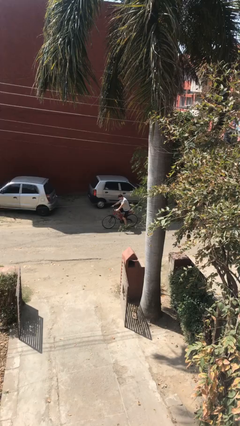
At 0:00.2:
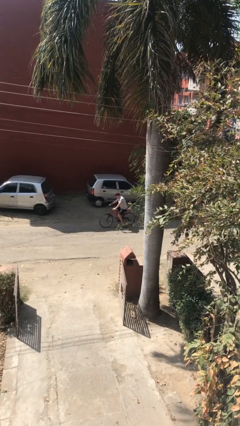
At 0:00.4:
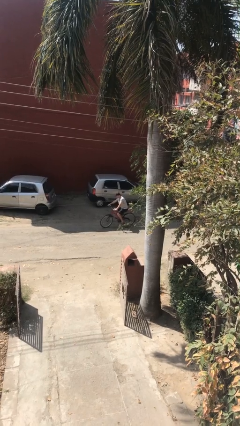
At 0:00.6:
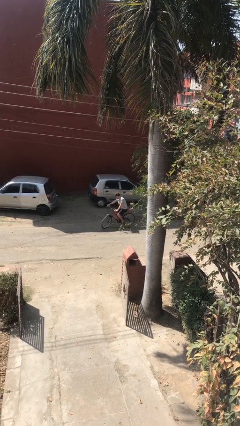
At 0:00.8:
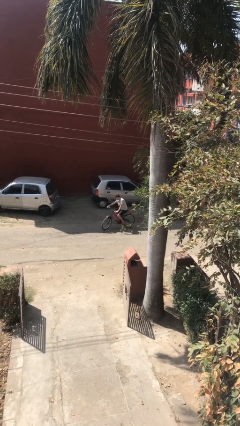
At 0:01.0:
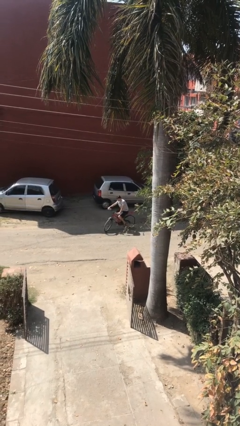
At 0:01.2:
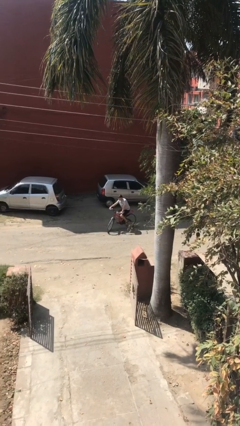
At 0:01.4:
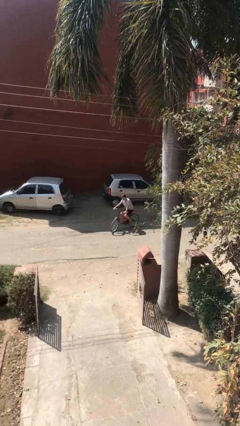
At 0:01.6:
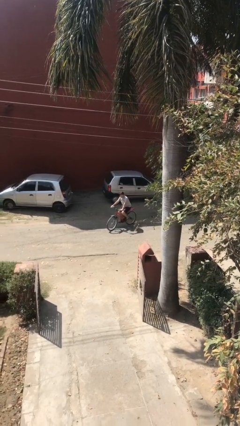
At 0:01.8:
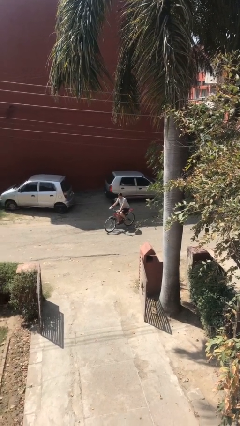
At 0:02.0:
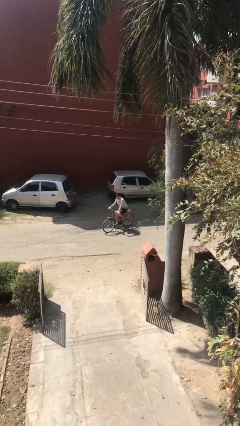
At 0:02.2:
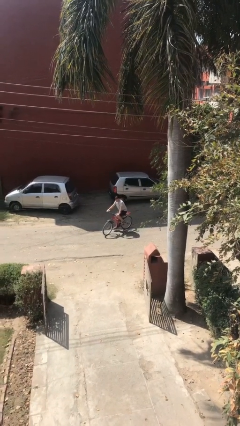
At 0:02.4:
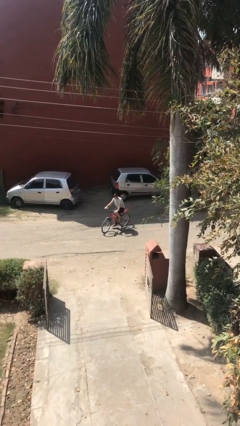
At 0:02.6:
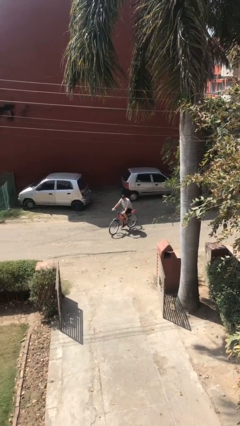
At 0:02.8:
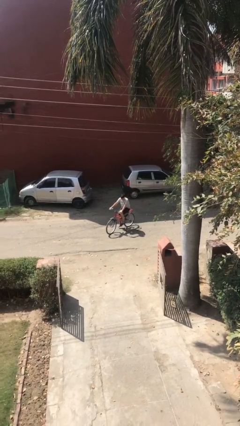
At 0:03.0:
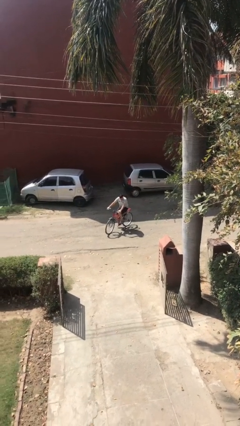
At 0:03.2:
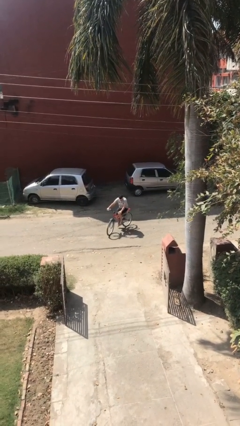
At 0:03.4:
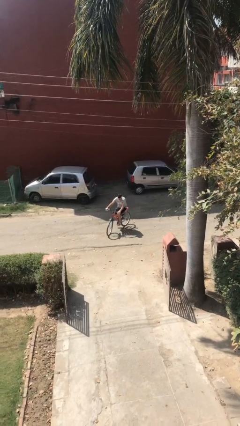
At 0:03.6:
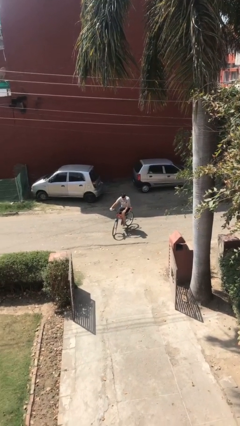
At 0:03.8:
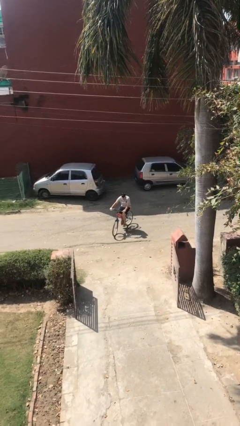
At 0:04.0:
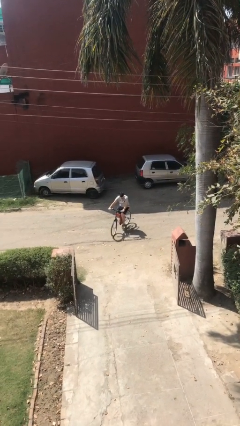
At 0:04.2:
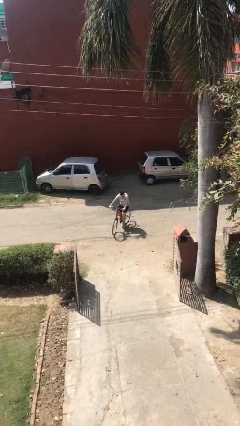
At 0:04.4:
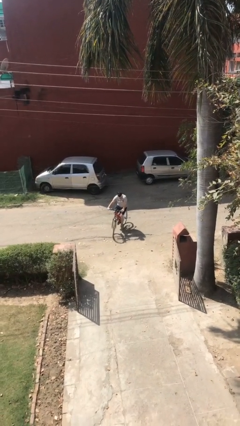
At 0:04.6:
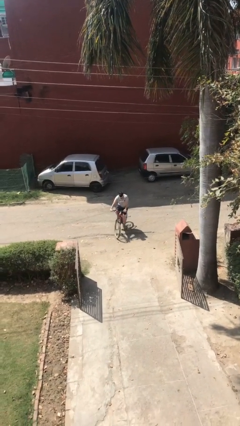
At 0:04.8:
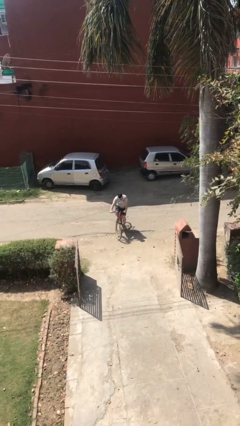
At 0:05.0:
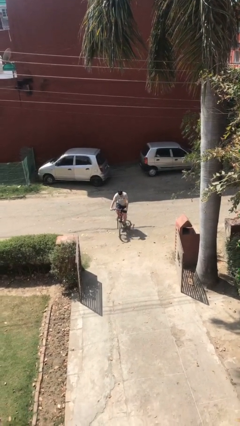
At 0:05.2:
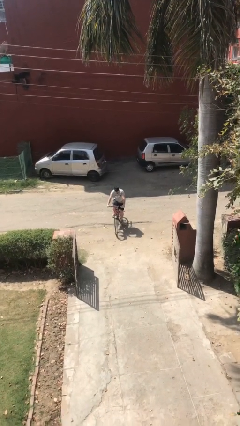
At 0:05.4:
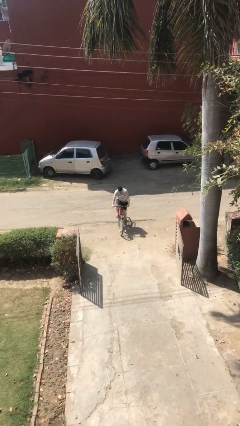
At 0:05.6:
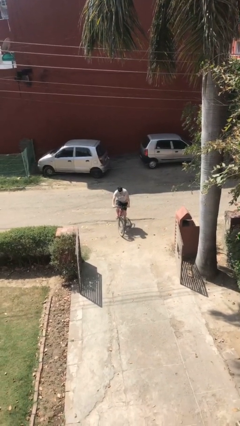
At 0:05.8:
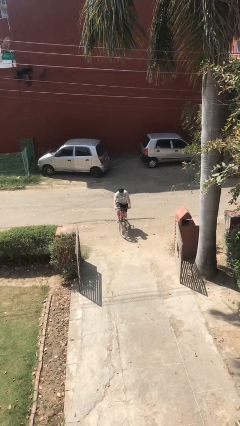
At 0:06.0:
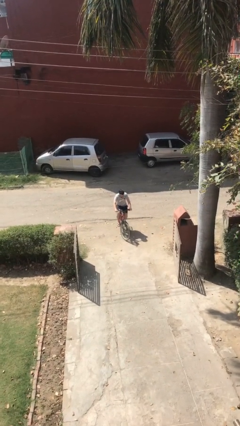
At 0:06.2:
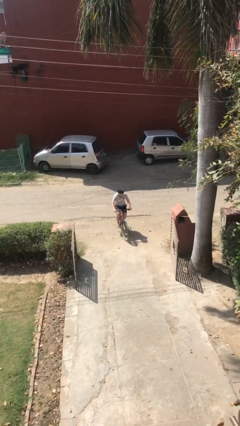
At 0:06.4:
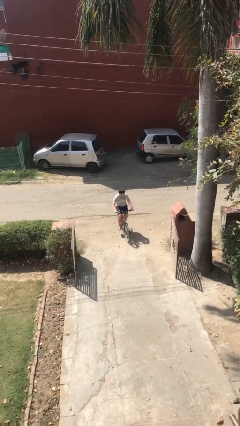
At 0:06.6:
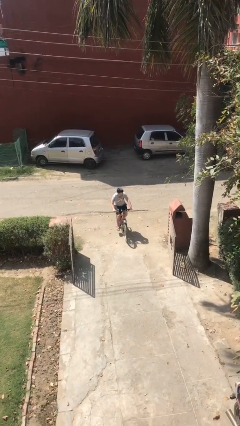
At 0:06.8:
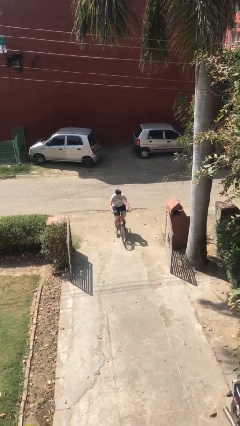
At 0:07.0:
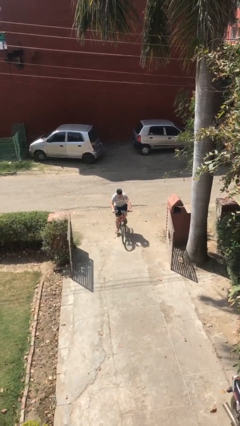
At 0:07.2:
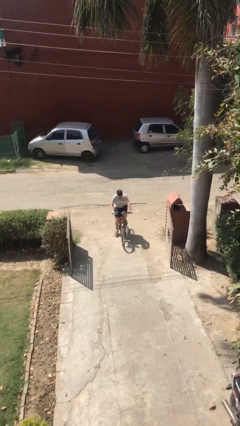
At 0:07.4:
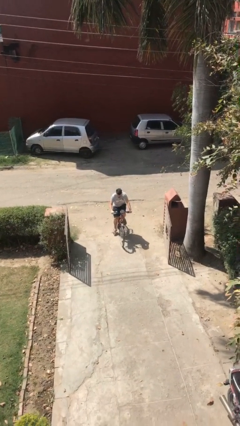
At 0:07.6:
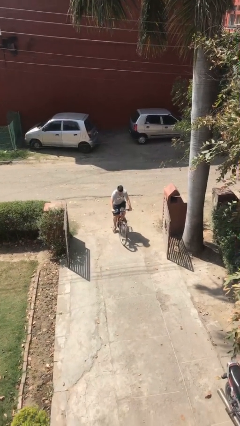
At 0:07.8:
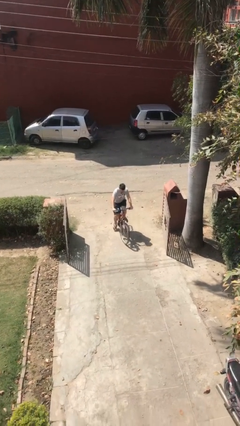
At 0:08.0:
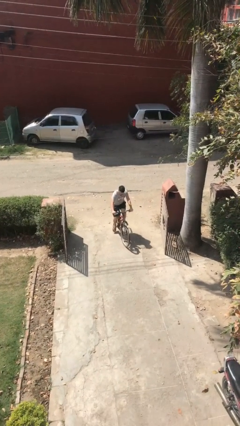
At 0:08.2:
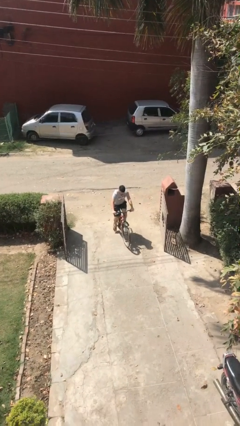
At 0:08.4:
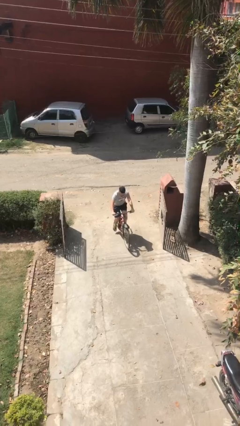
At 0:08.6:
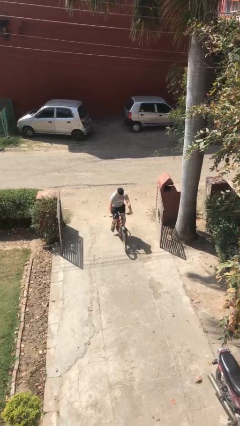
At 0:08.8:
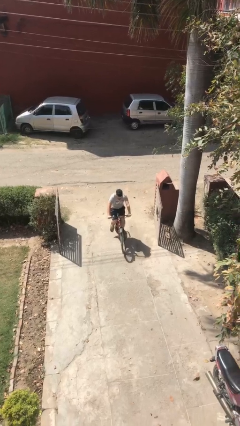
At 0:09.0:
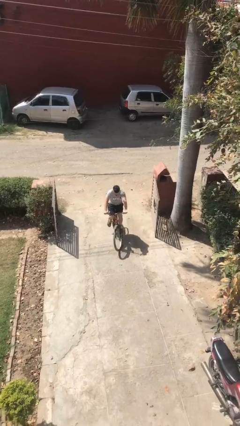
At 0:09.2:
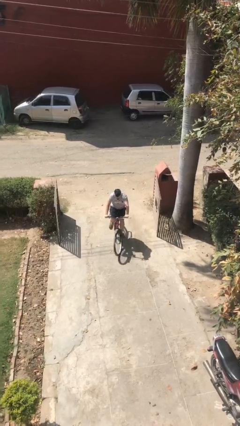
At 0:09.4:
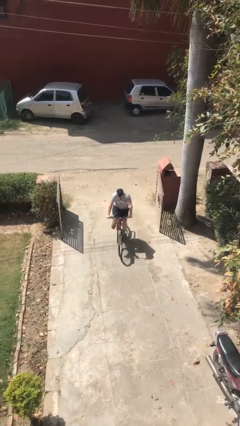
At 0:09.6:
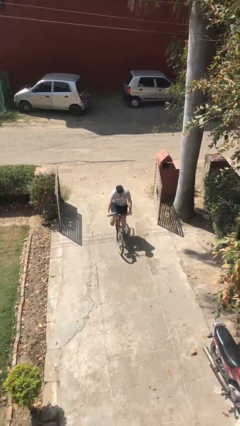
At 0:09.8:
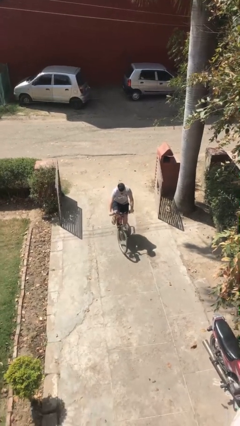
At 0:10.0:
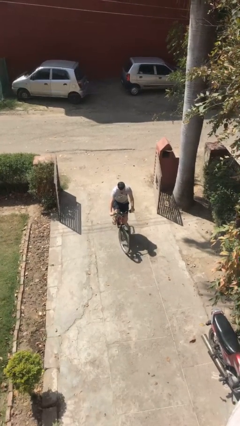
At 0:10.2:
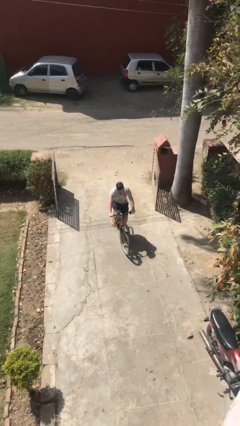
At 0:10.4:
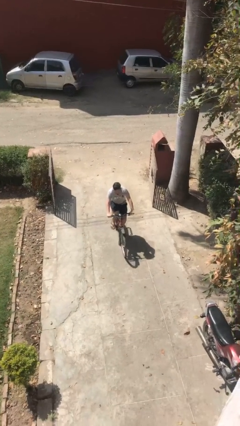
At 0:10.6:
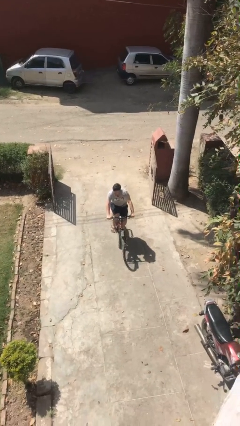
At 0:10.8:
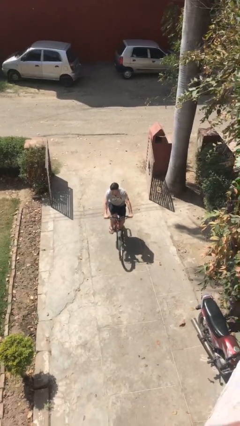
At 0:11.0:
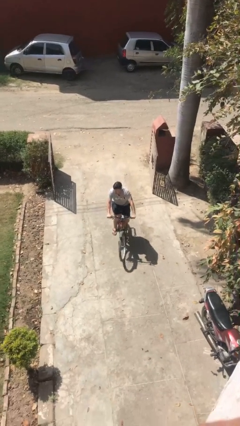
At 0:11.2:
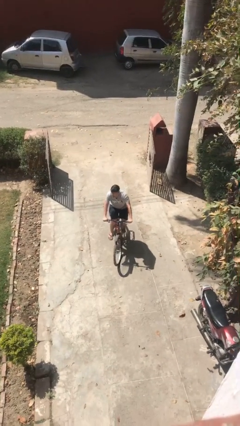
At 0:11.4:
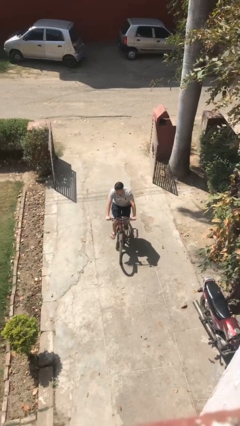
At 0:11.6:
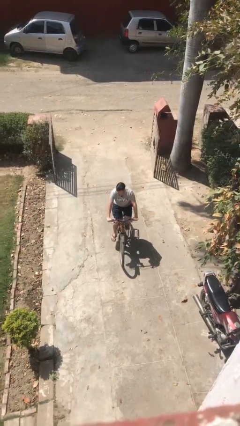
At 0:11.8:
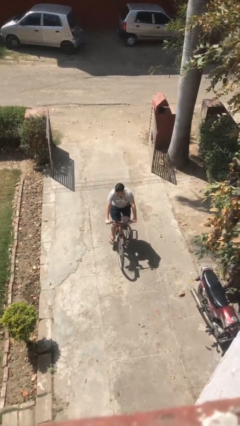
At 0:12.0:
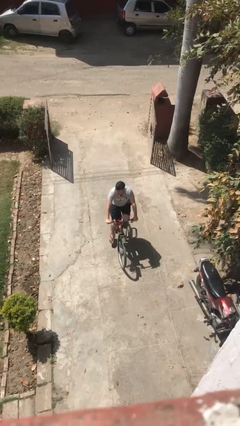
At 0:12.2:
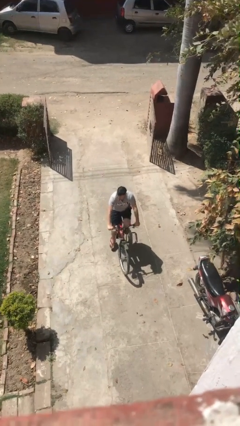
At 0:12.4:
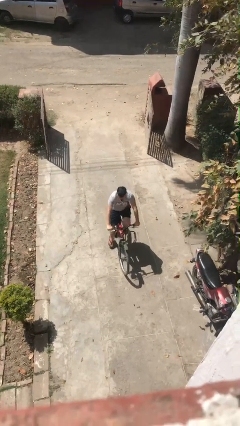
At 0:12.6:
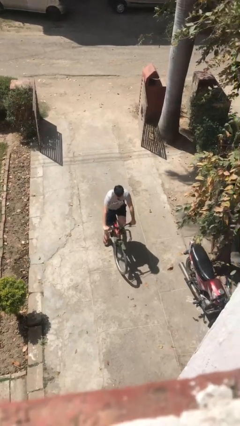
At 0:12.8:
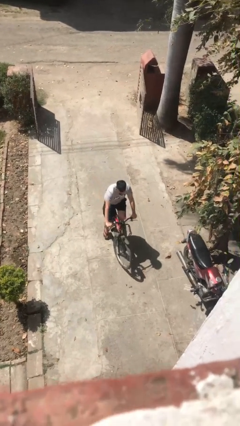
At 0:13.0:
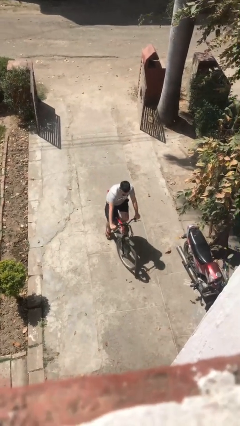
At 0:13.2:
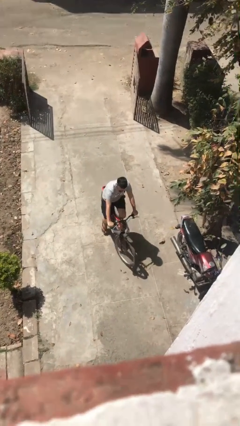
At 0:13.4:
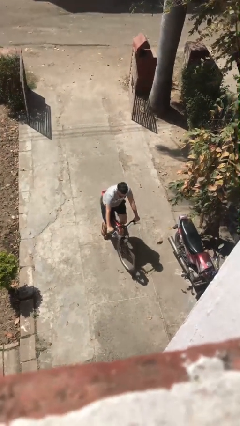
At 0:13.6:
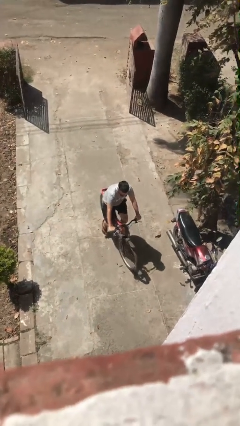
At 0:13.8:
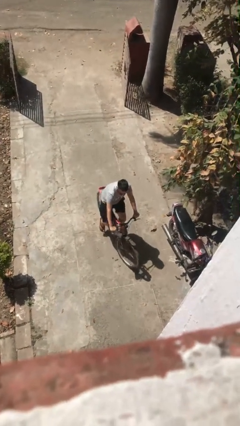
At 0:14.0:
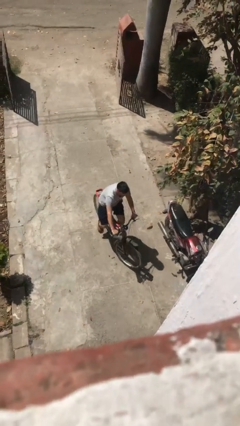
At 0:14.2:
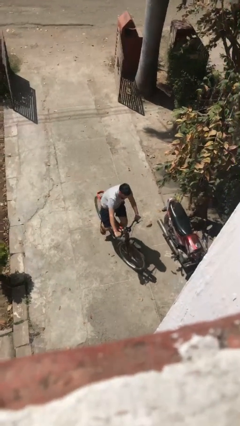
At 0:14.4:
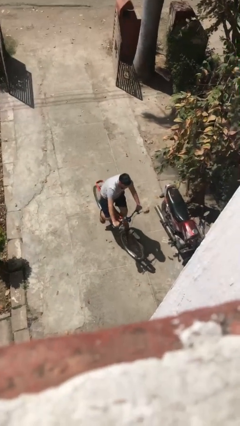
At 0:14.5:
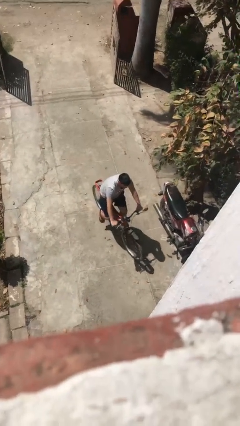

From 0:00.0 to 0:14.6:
person rides bicycle

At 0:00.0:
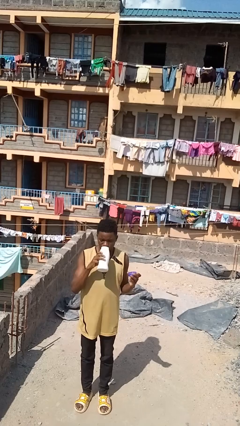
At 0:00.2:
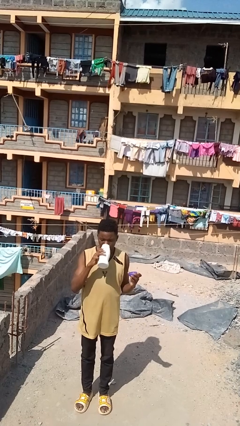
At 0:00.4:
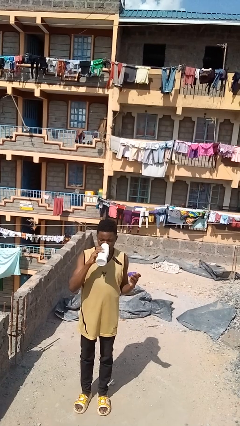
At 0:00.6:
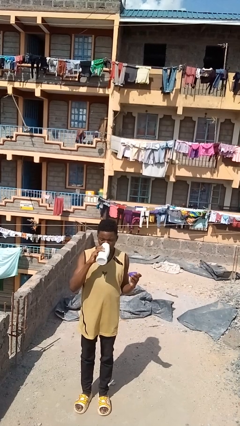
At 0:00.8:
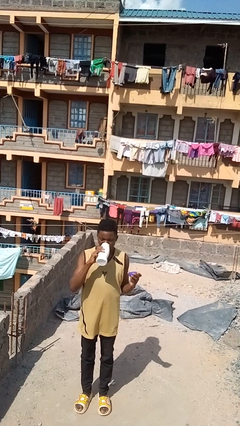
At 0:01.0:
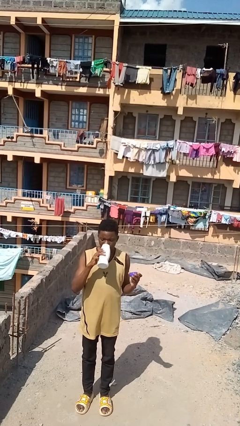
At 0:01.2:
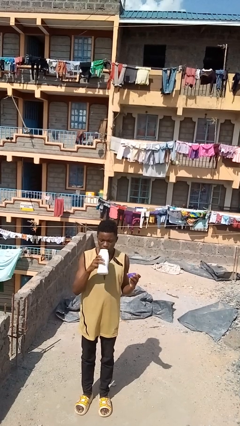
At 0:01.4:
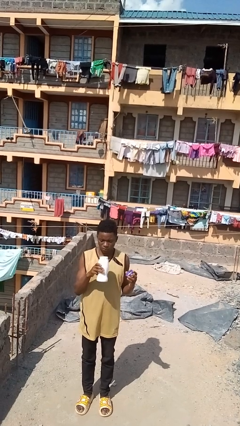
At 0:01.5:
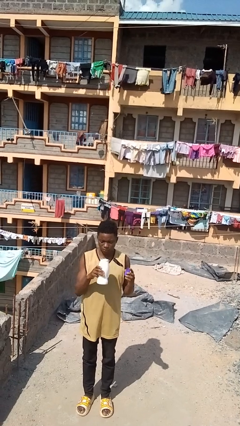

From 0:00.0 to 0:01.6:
person drinks from beverage can

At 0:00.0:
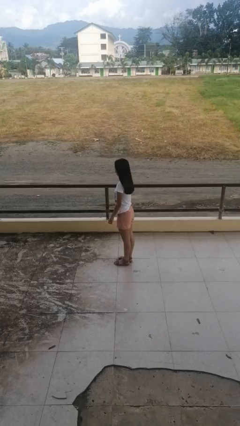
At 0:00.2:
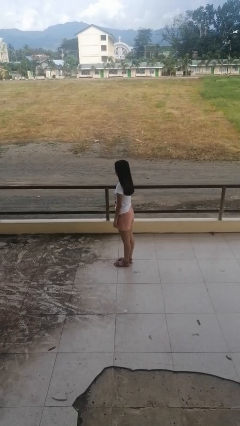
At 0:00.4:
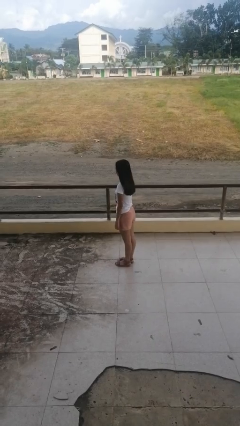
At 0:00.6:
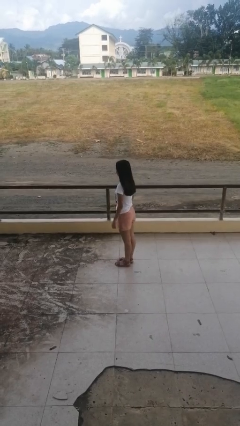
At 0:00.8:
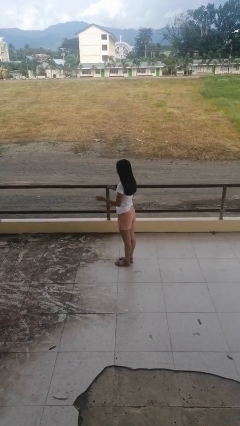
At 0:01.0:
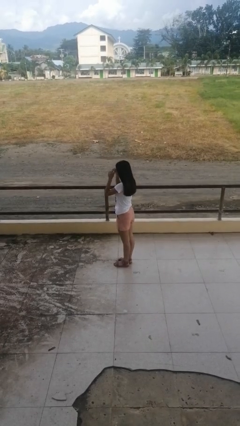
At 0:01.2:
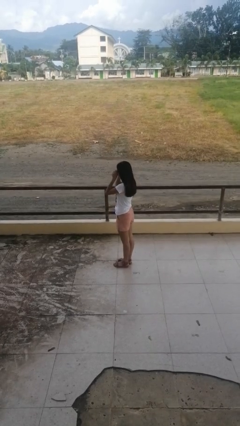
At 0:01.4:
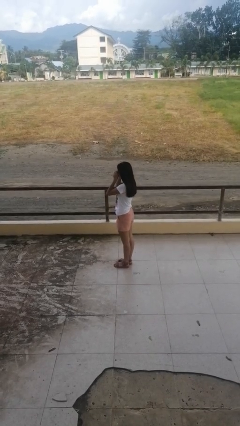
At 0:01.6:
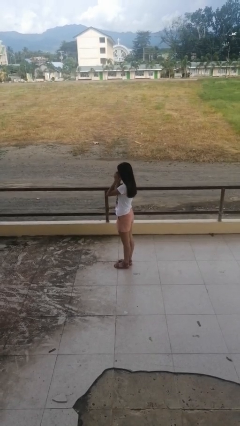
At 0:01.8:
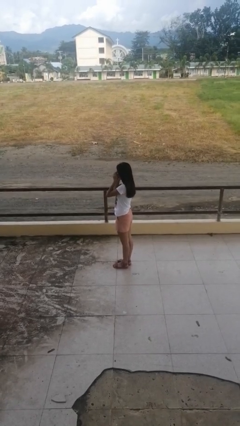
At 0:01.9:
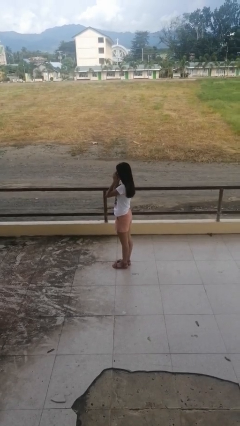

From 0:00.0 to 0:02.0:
person rubs eyes
